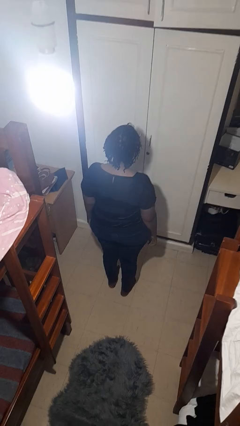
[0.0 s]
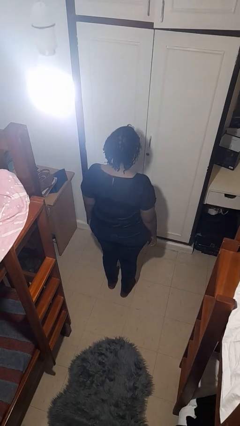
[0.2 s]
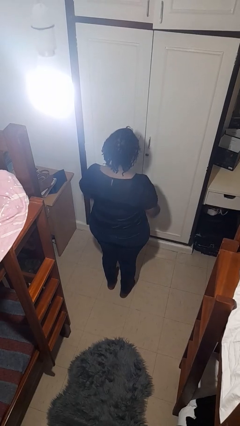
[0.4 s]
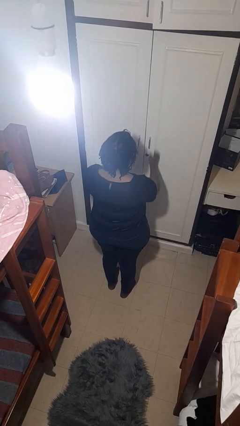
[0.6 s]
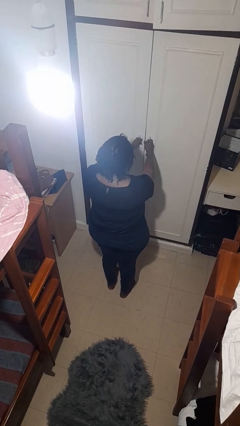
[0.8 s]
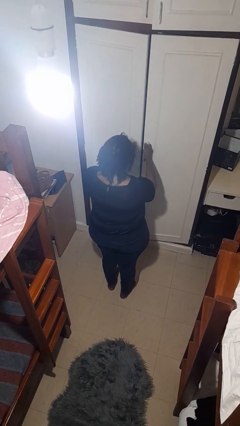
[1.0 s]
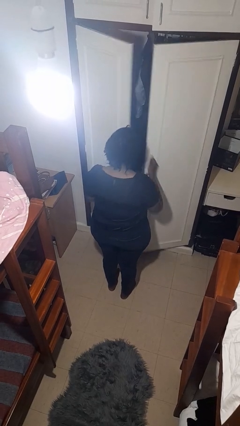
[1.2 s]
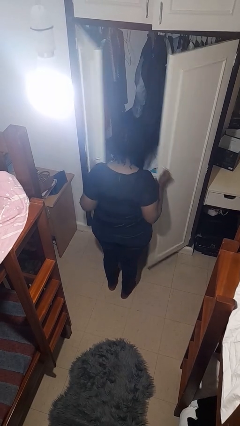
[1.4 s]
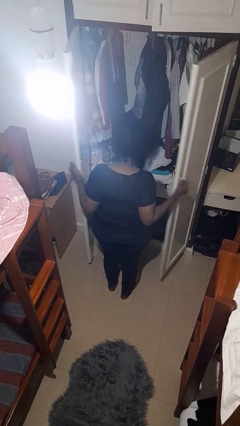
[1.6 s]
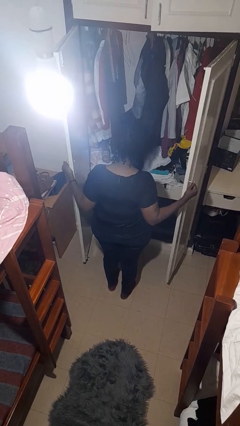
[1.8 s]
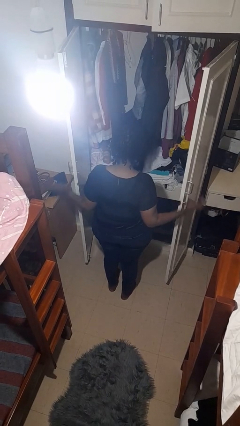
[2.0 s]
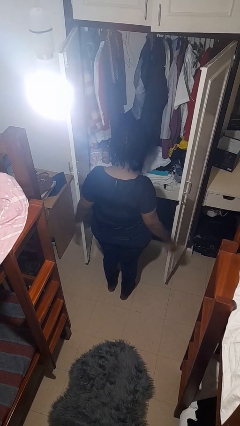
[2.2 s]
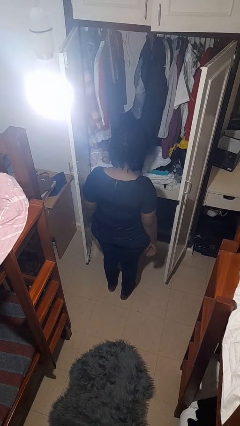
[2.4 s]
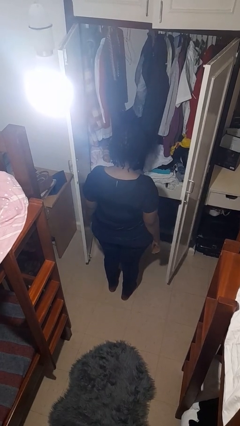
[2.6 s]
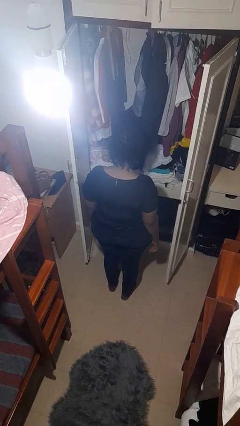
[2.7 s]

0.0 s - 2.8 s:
person opens closet door

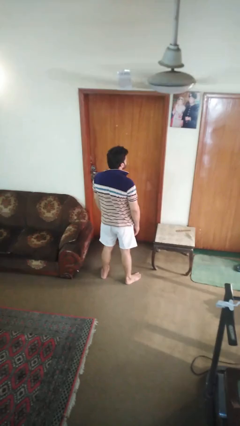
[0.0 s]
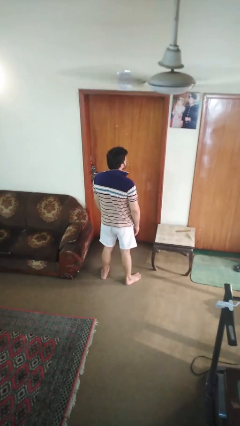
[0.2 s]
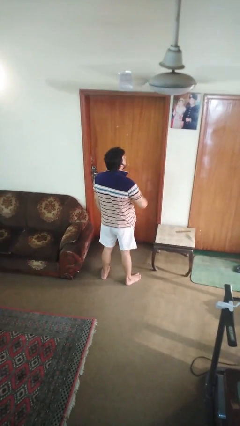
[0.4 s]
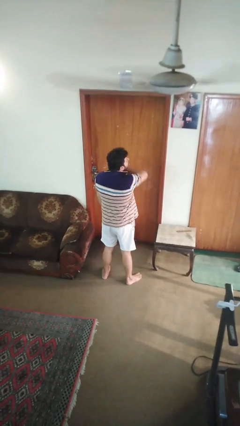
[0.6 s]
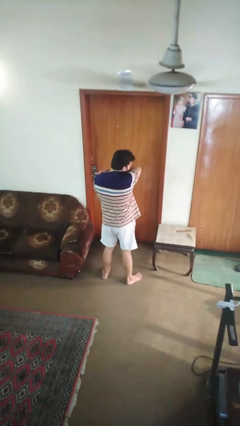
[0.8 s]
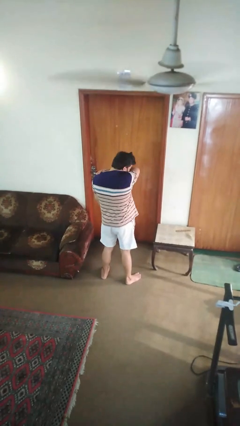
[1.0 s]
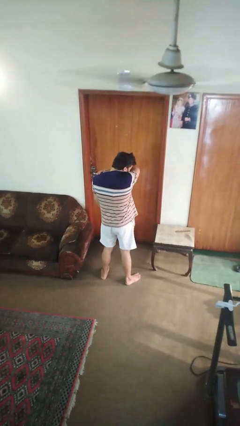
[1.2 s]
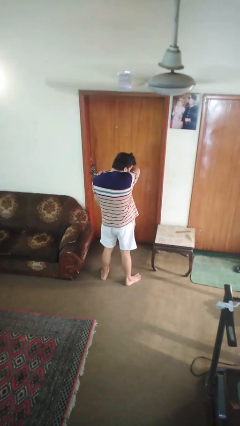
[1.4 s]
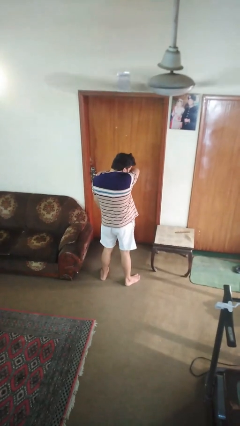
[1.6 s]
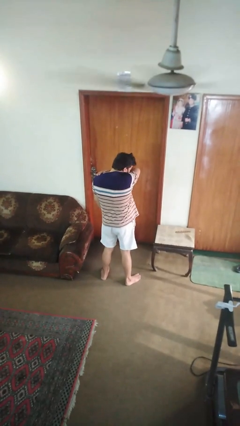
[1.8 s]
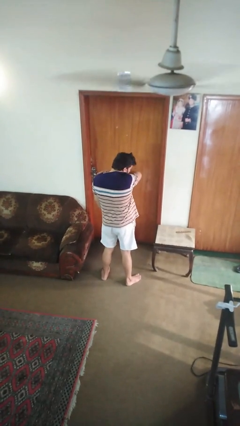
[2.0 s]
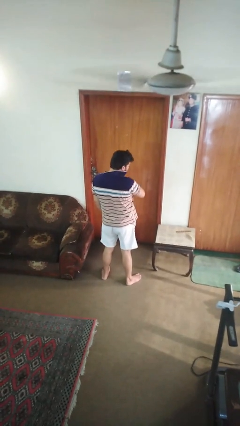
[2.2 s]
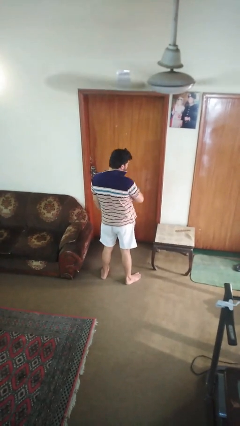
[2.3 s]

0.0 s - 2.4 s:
person sneezes into arm

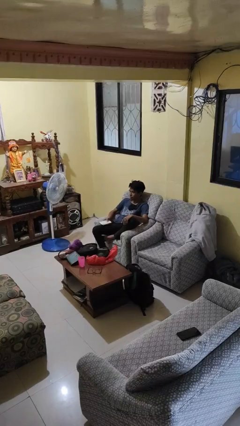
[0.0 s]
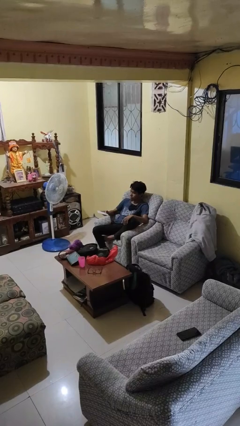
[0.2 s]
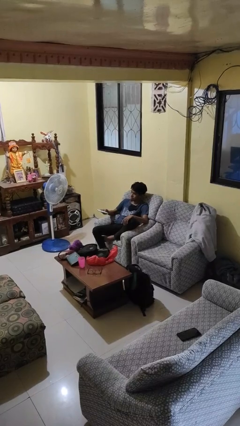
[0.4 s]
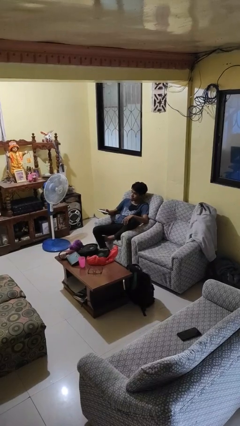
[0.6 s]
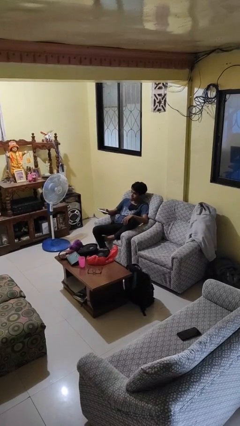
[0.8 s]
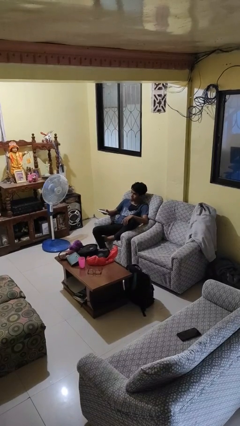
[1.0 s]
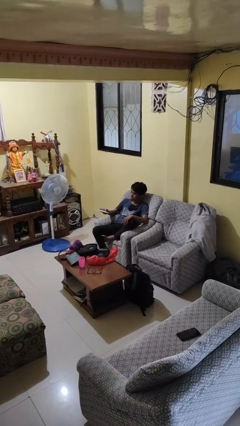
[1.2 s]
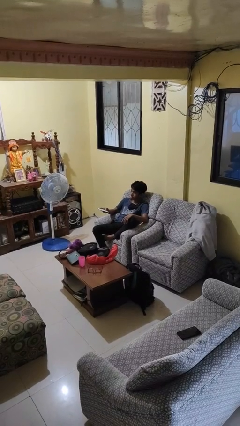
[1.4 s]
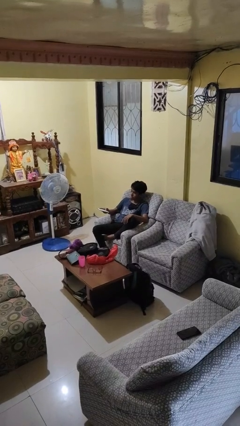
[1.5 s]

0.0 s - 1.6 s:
person uses television remote

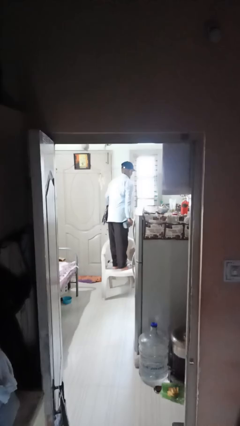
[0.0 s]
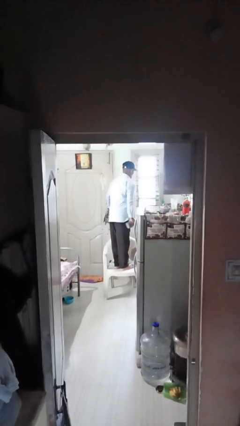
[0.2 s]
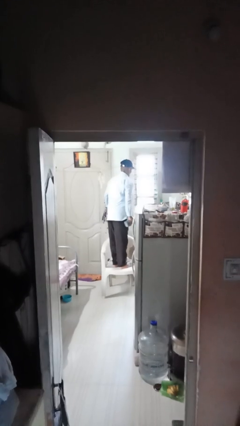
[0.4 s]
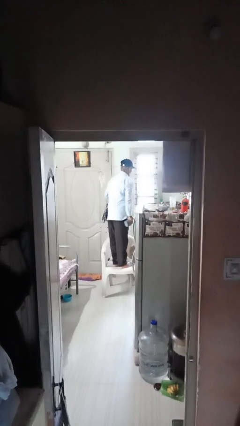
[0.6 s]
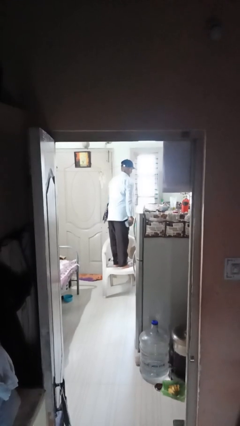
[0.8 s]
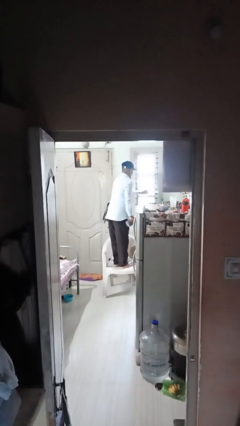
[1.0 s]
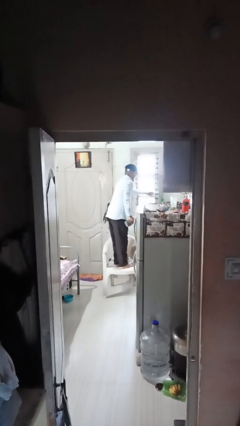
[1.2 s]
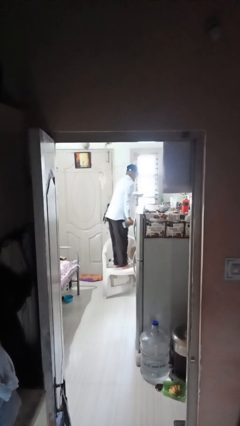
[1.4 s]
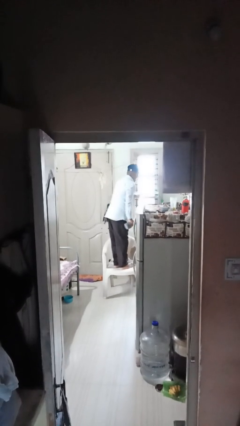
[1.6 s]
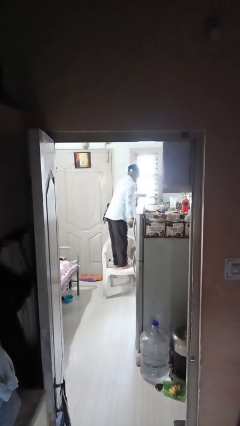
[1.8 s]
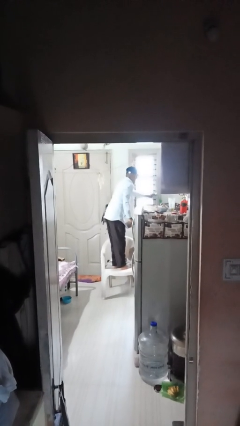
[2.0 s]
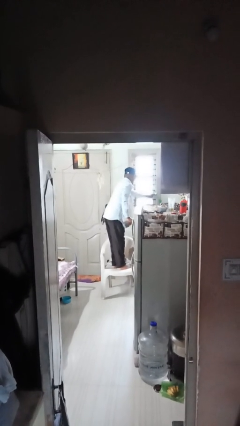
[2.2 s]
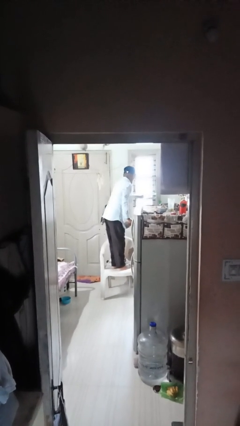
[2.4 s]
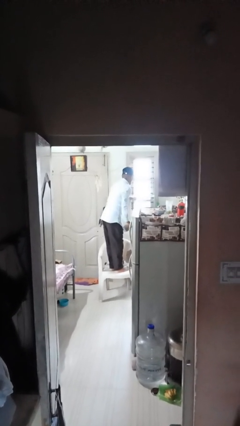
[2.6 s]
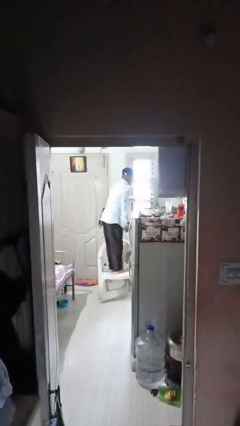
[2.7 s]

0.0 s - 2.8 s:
person washes window

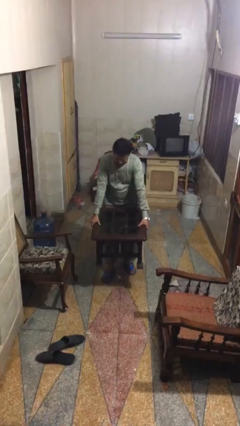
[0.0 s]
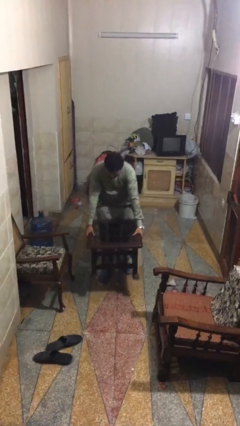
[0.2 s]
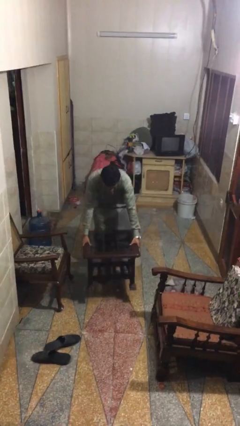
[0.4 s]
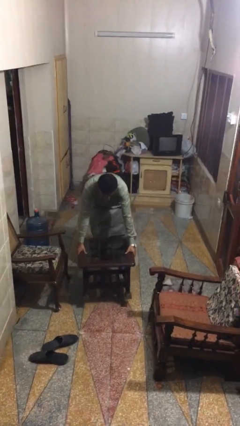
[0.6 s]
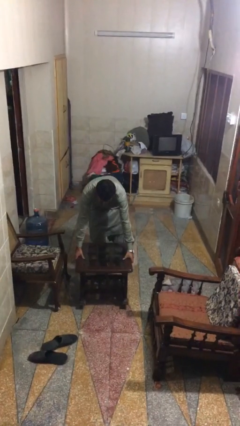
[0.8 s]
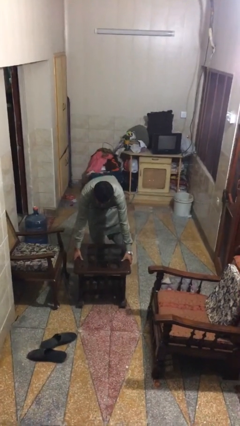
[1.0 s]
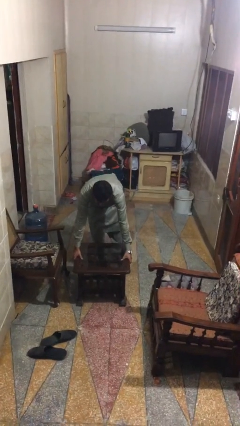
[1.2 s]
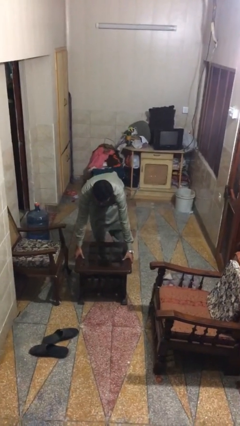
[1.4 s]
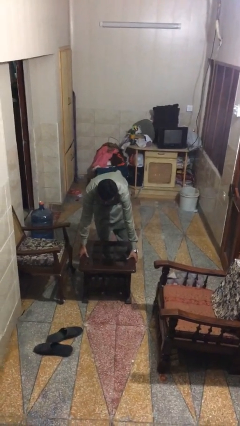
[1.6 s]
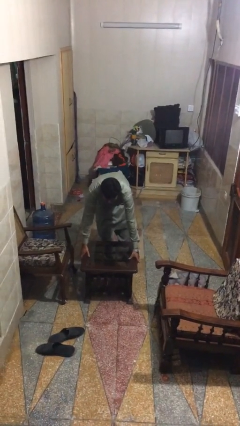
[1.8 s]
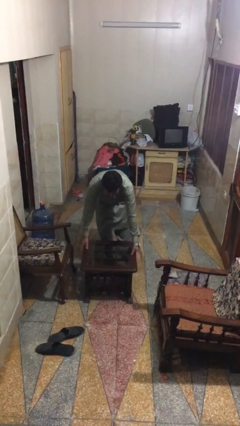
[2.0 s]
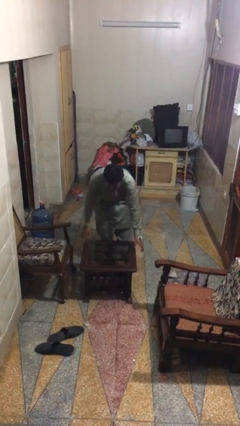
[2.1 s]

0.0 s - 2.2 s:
person puts down object on floor

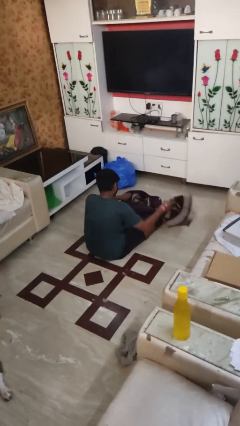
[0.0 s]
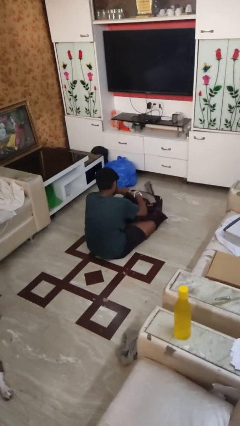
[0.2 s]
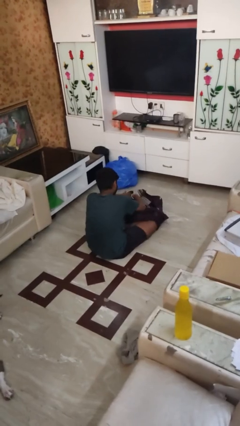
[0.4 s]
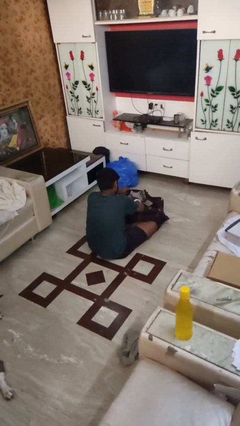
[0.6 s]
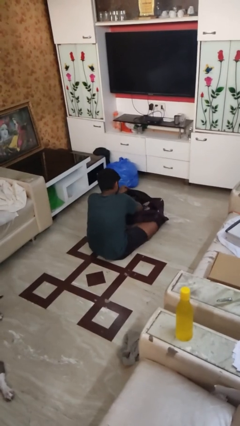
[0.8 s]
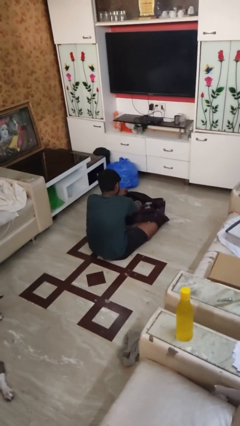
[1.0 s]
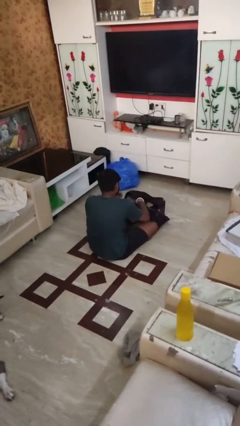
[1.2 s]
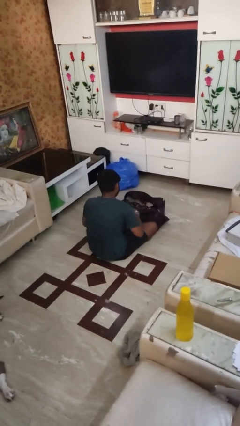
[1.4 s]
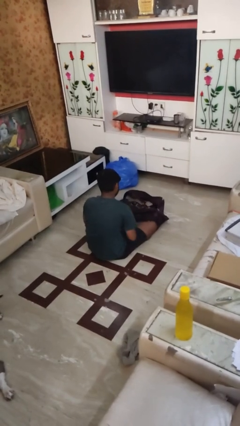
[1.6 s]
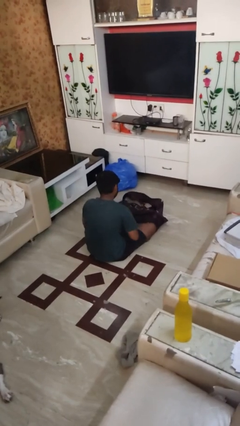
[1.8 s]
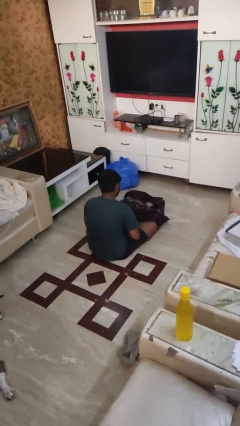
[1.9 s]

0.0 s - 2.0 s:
person loads clothes into suitcase

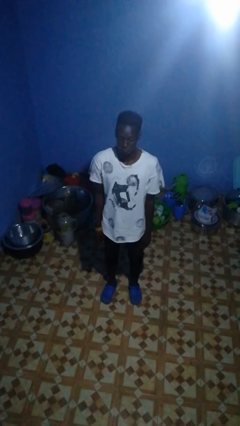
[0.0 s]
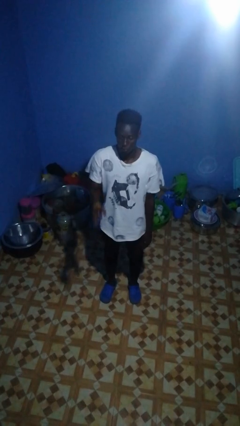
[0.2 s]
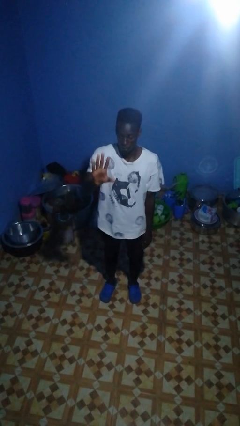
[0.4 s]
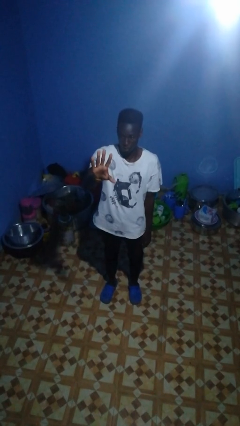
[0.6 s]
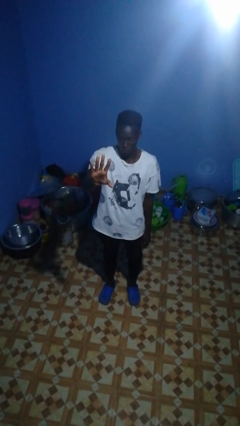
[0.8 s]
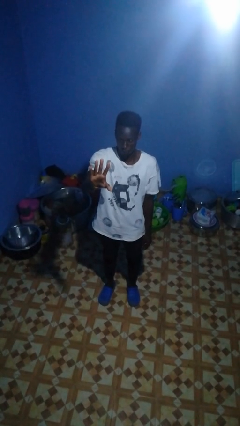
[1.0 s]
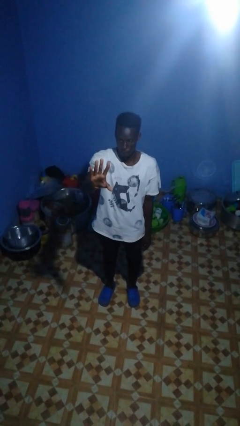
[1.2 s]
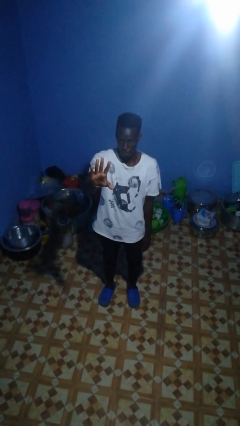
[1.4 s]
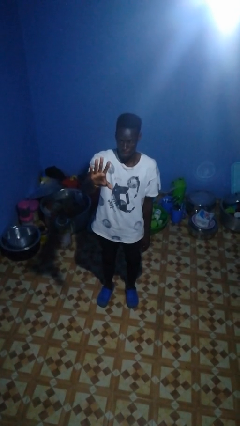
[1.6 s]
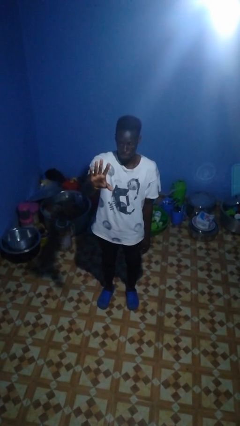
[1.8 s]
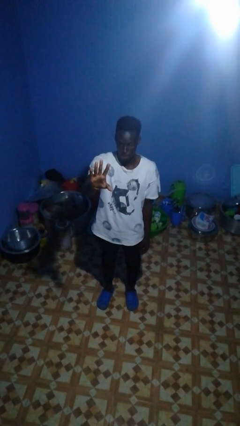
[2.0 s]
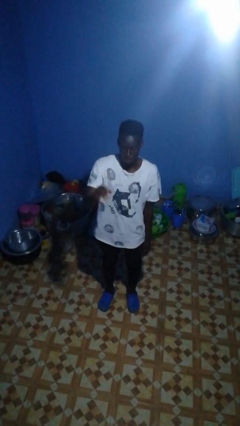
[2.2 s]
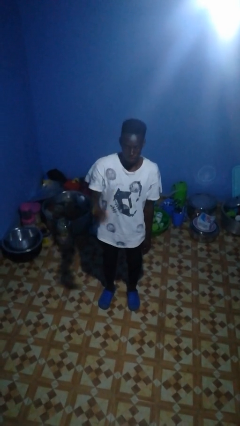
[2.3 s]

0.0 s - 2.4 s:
person gestures number five
